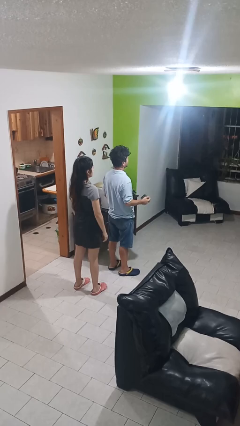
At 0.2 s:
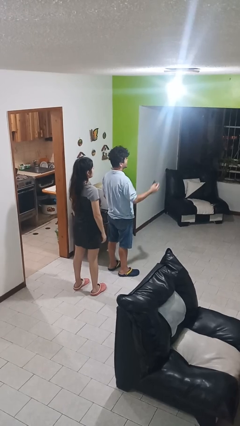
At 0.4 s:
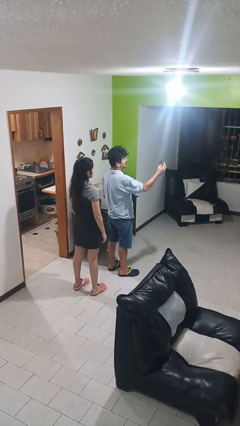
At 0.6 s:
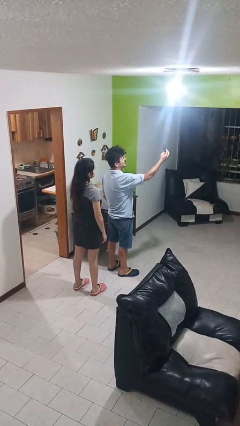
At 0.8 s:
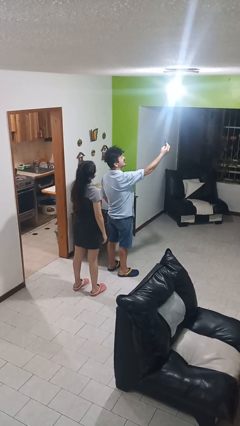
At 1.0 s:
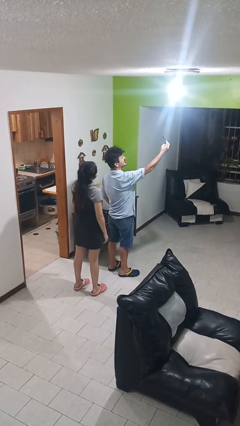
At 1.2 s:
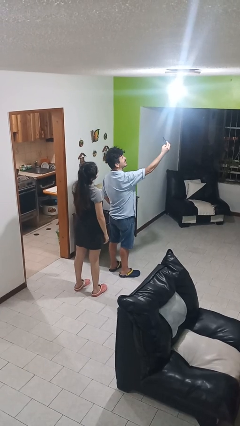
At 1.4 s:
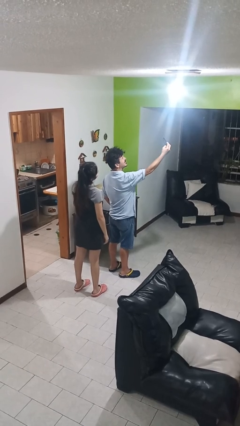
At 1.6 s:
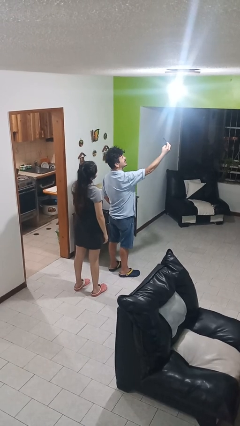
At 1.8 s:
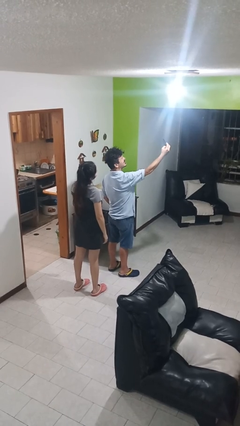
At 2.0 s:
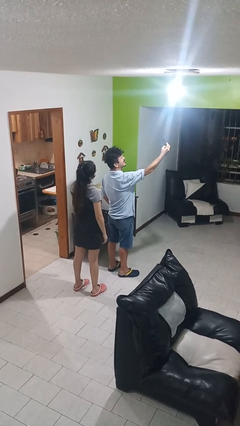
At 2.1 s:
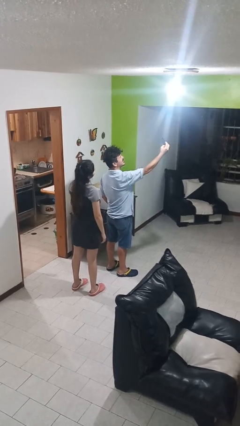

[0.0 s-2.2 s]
person takes selfie with person

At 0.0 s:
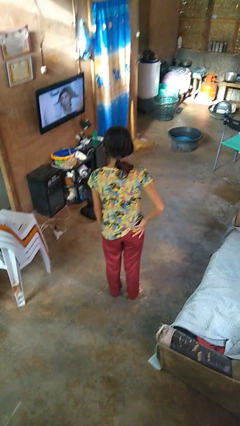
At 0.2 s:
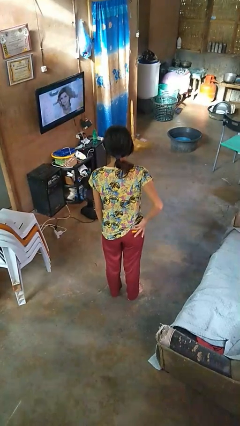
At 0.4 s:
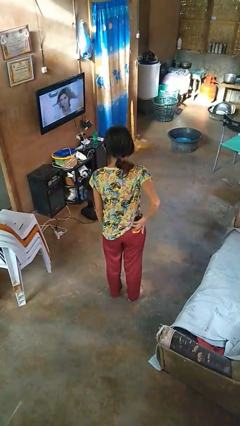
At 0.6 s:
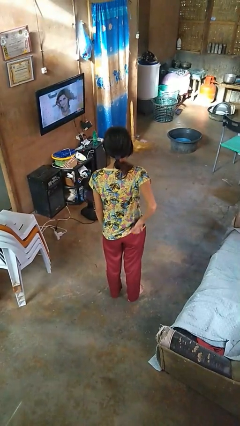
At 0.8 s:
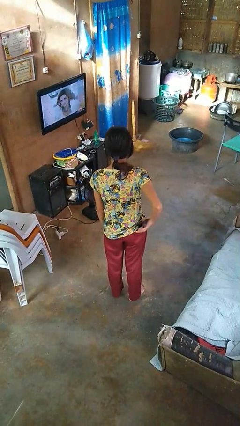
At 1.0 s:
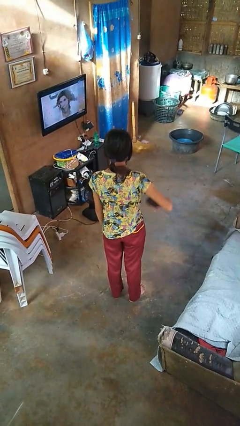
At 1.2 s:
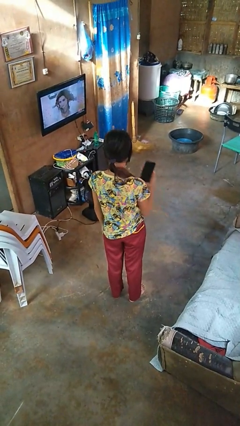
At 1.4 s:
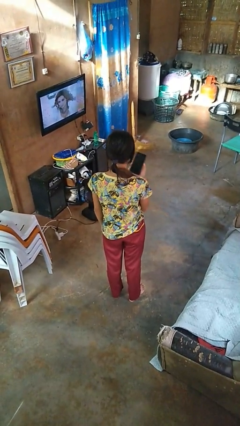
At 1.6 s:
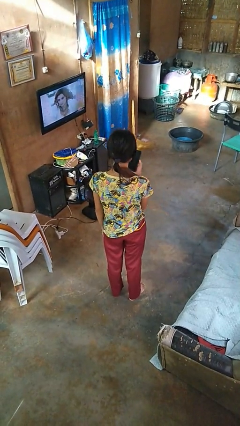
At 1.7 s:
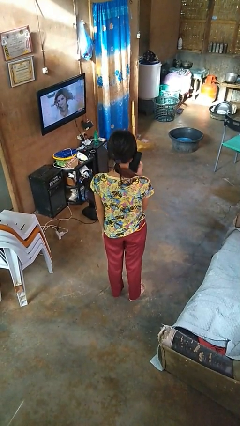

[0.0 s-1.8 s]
person takes phone from pocket

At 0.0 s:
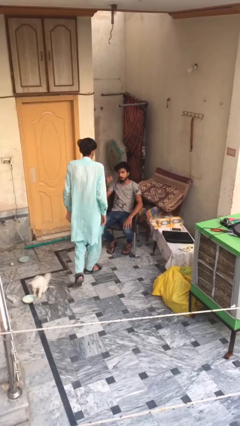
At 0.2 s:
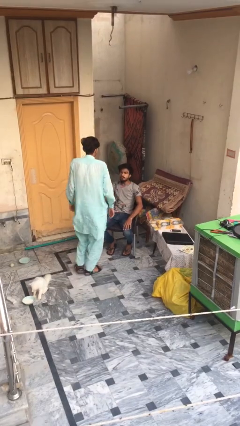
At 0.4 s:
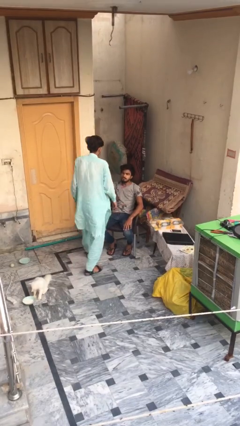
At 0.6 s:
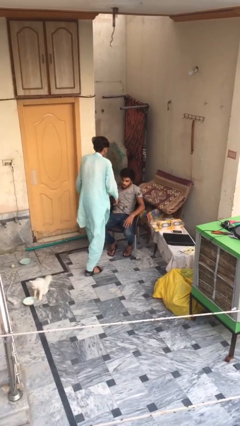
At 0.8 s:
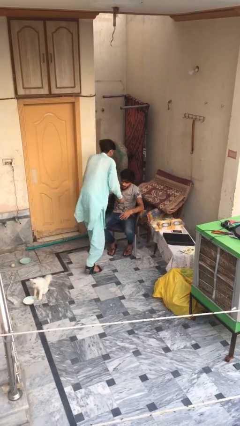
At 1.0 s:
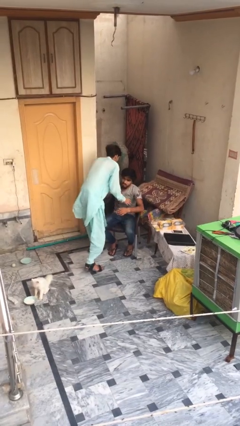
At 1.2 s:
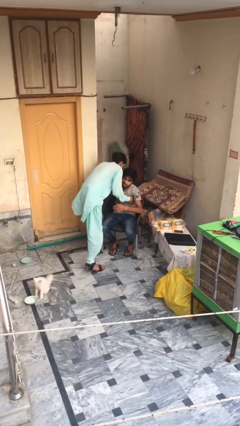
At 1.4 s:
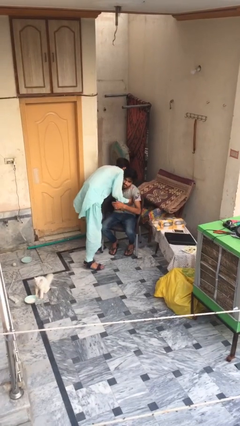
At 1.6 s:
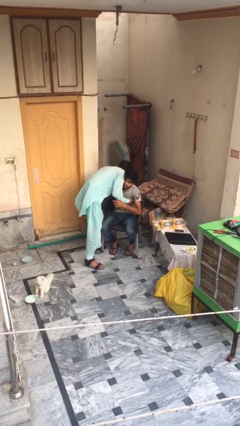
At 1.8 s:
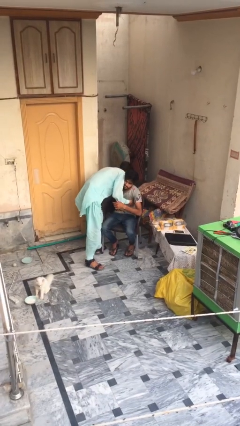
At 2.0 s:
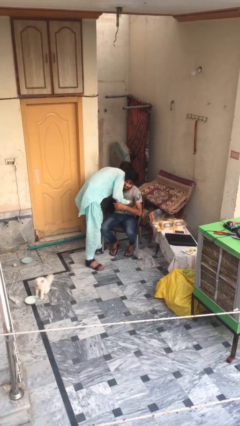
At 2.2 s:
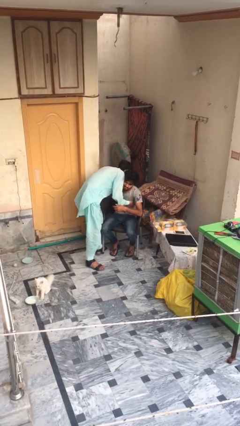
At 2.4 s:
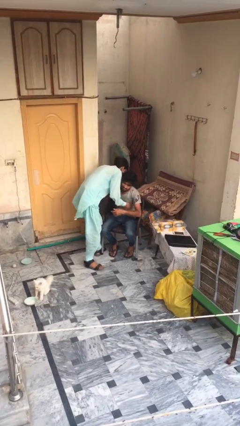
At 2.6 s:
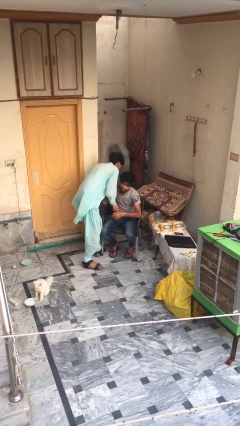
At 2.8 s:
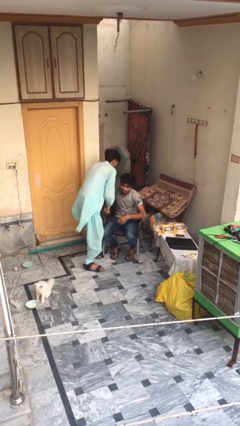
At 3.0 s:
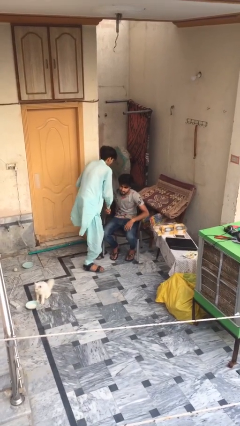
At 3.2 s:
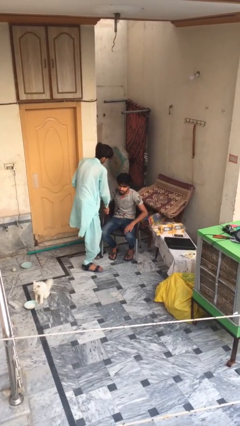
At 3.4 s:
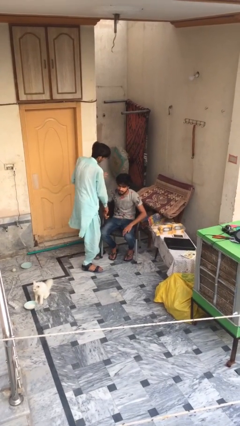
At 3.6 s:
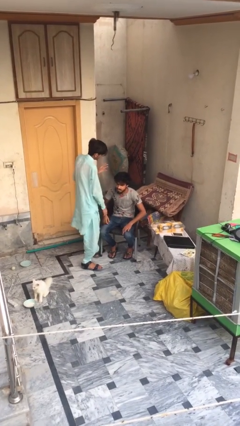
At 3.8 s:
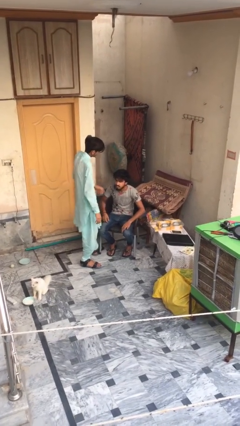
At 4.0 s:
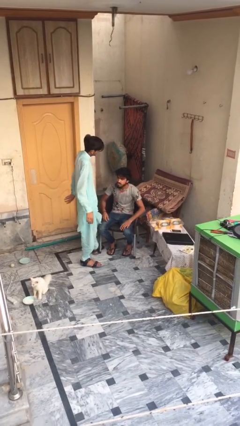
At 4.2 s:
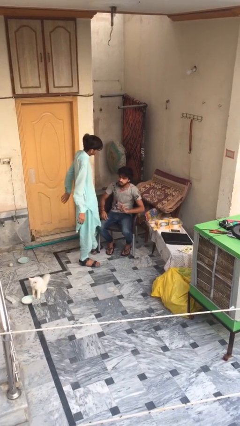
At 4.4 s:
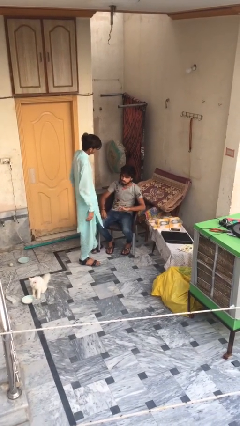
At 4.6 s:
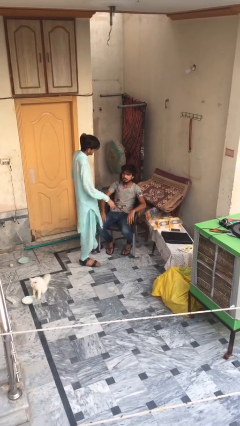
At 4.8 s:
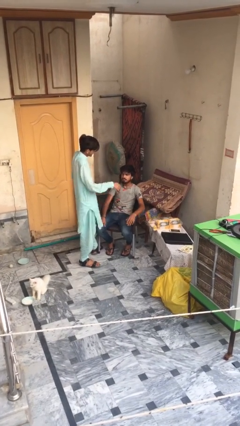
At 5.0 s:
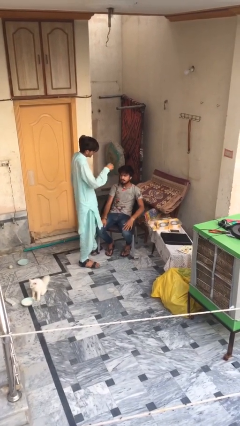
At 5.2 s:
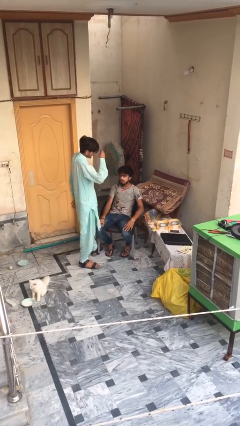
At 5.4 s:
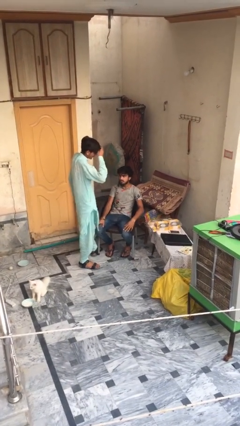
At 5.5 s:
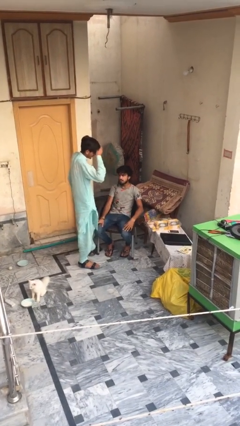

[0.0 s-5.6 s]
person embraces person

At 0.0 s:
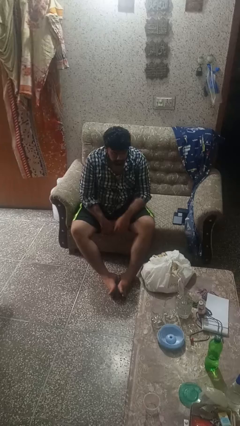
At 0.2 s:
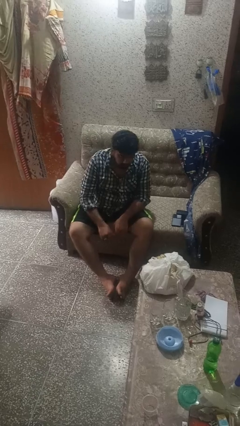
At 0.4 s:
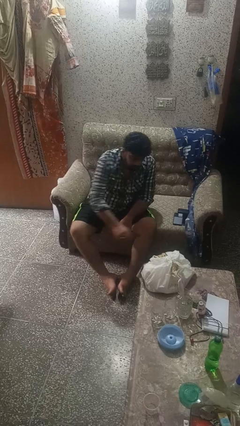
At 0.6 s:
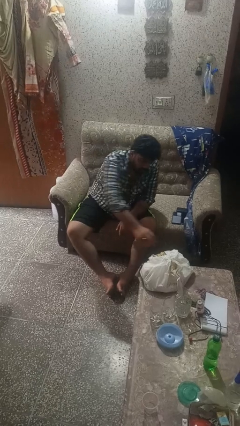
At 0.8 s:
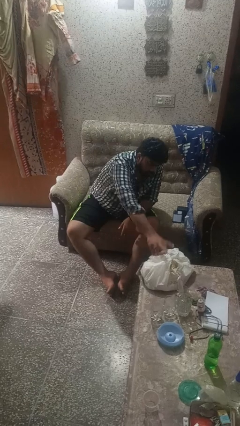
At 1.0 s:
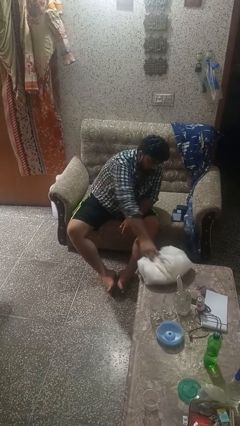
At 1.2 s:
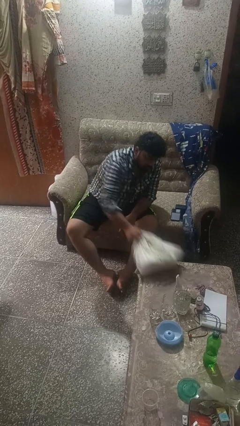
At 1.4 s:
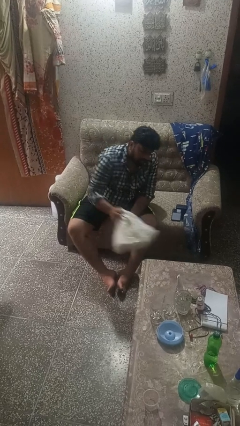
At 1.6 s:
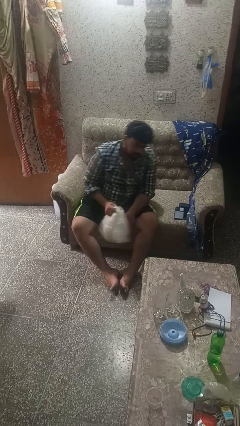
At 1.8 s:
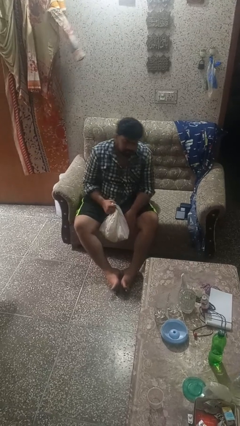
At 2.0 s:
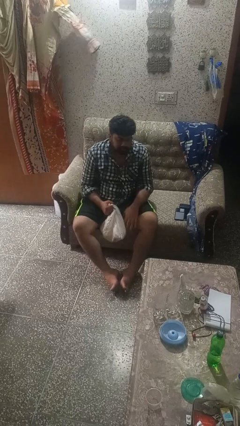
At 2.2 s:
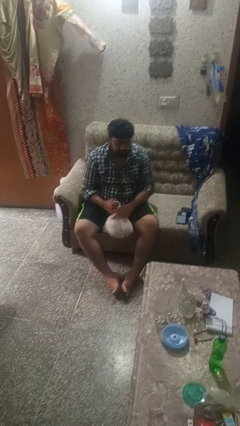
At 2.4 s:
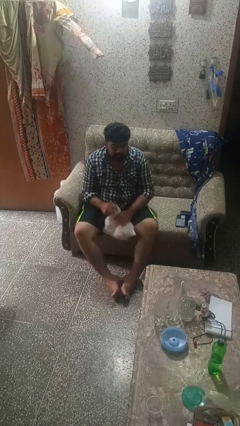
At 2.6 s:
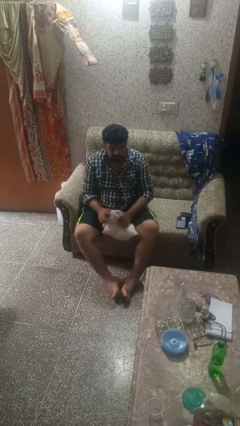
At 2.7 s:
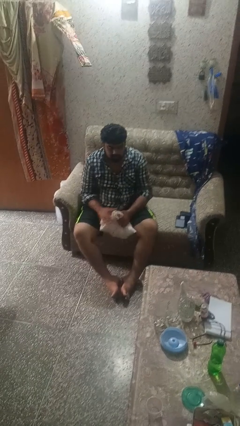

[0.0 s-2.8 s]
person picks up object from table

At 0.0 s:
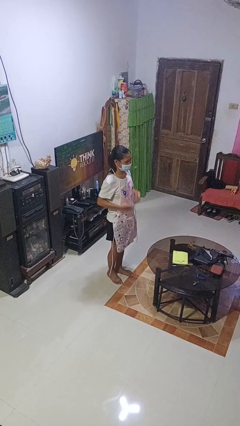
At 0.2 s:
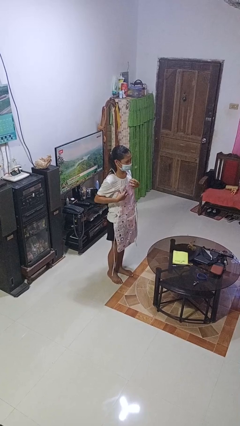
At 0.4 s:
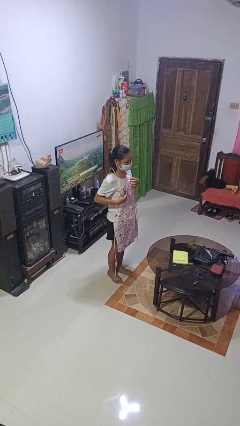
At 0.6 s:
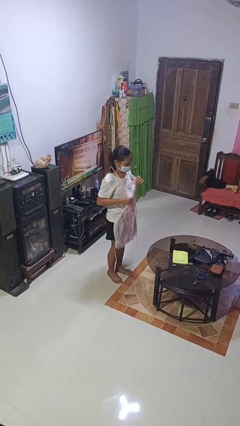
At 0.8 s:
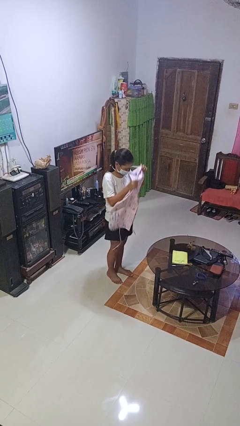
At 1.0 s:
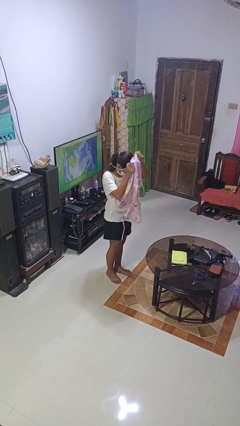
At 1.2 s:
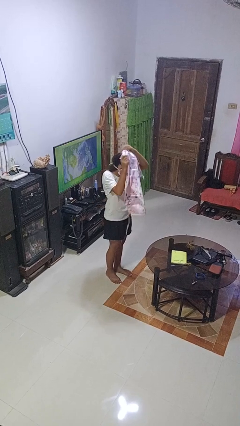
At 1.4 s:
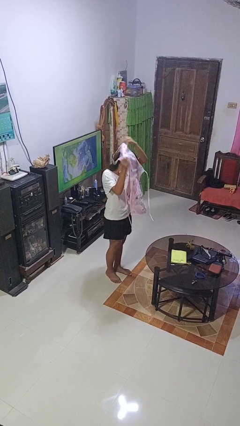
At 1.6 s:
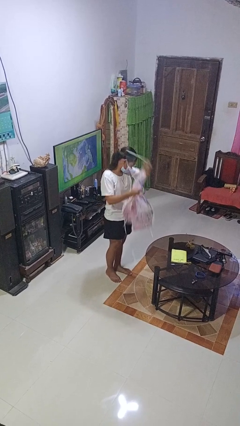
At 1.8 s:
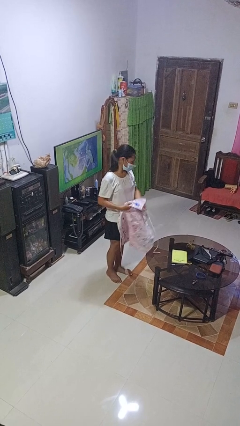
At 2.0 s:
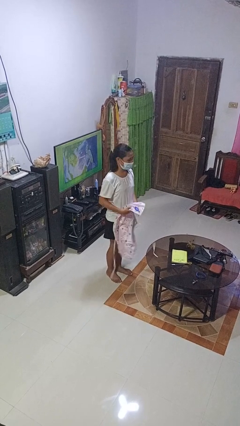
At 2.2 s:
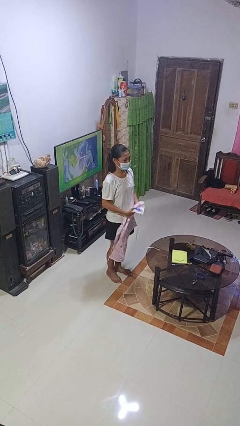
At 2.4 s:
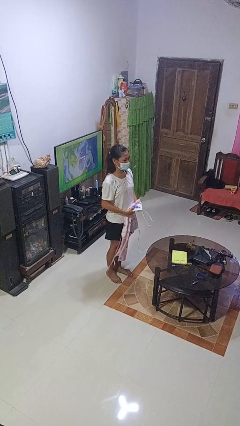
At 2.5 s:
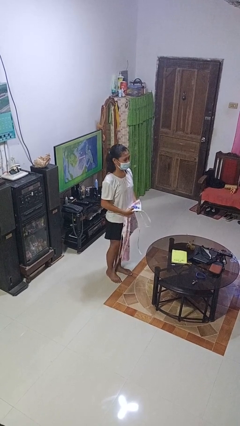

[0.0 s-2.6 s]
person takes off apron

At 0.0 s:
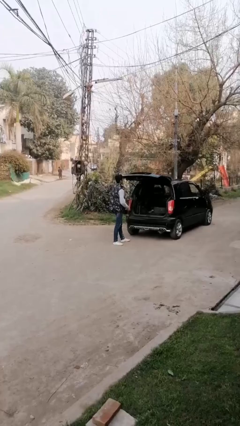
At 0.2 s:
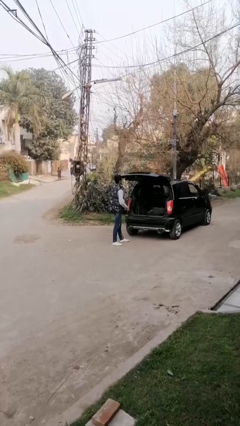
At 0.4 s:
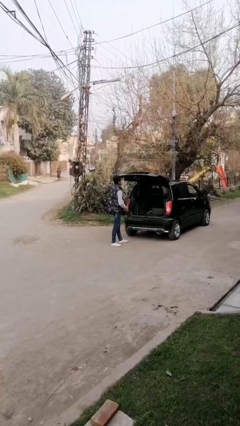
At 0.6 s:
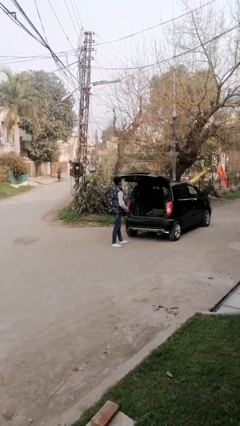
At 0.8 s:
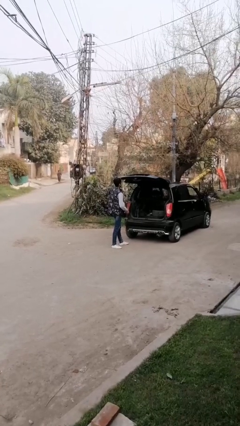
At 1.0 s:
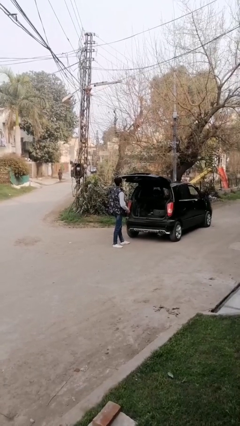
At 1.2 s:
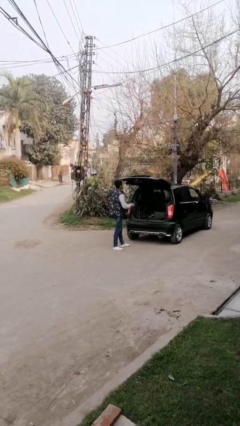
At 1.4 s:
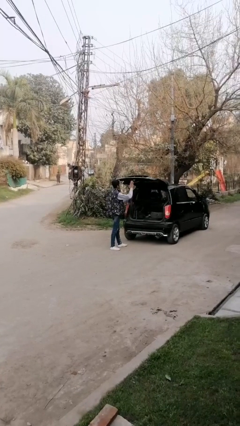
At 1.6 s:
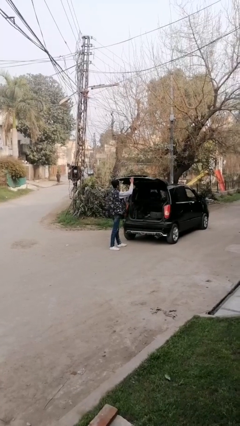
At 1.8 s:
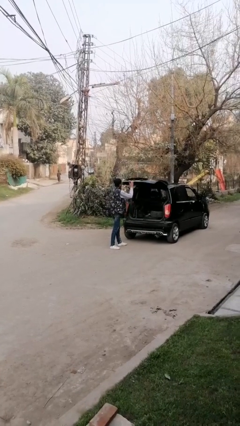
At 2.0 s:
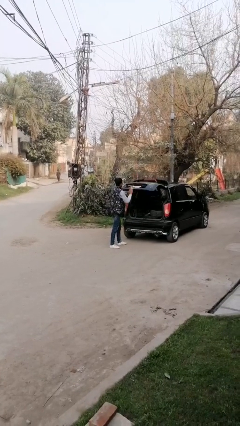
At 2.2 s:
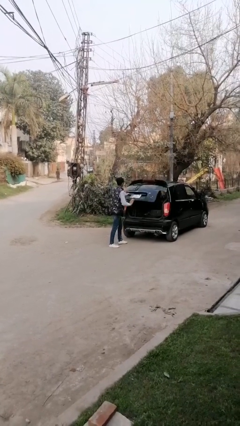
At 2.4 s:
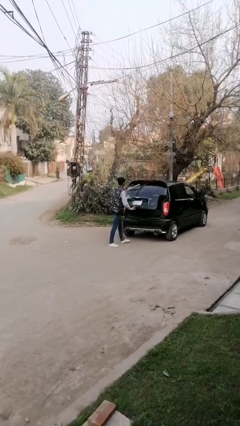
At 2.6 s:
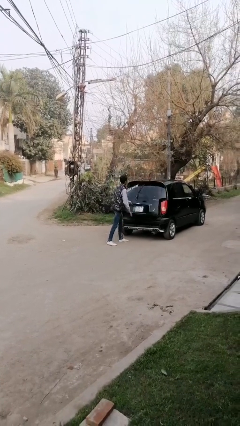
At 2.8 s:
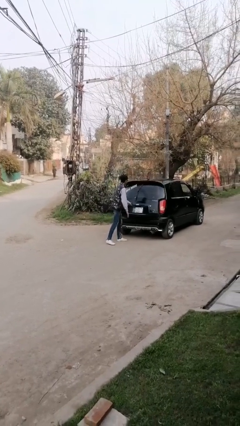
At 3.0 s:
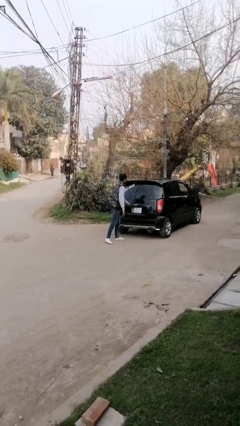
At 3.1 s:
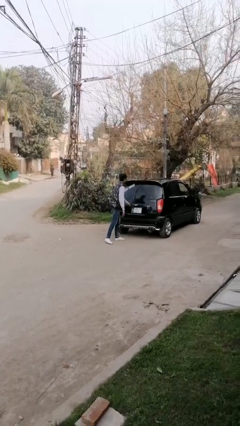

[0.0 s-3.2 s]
person opens car trunk
